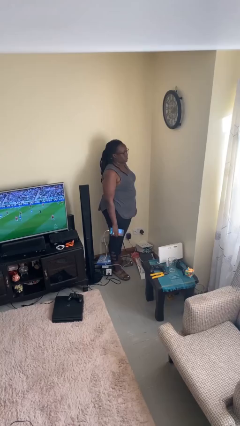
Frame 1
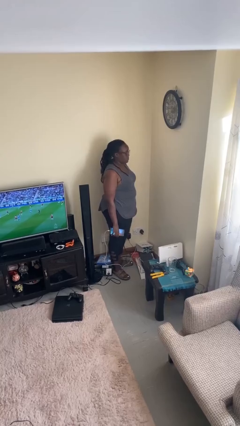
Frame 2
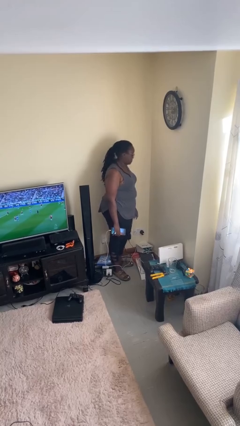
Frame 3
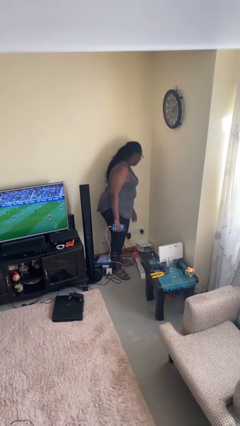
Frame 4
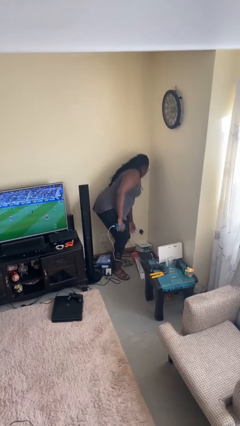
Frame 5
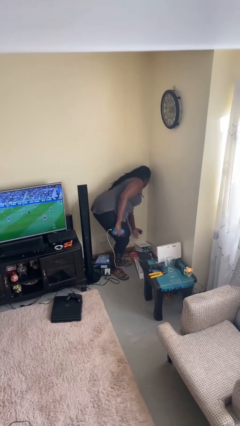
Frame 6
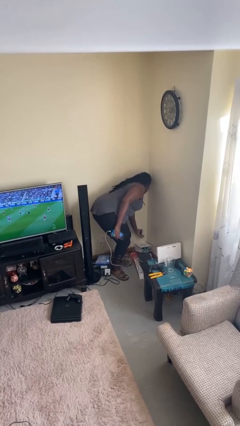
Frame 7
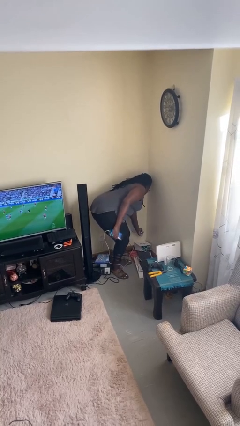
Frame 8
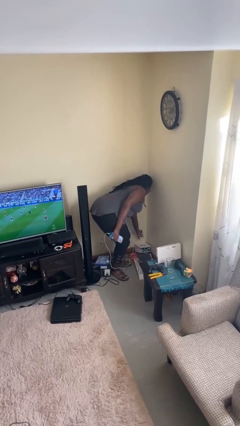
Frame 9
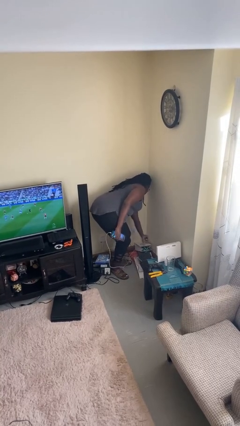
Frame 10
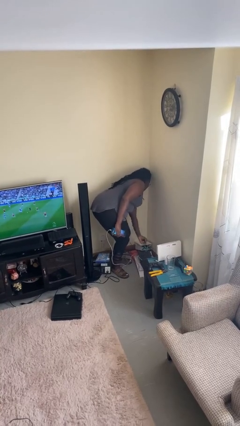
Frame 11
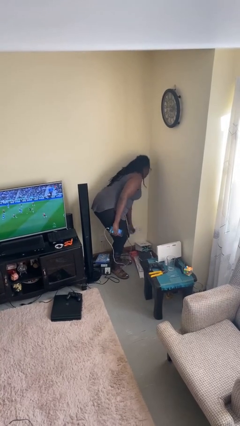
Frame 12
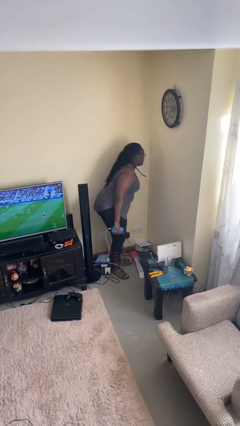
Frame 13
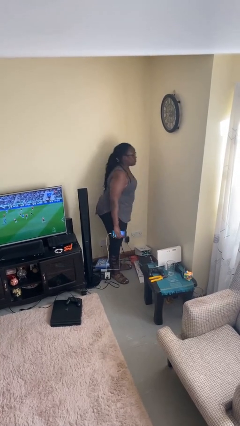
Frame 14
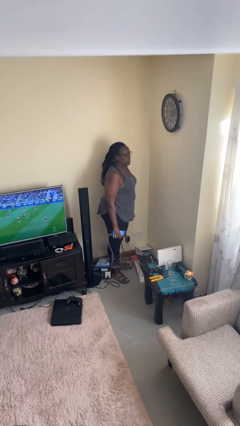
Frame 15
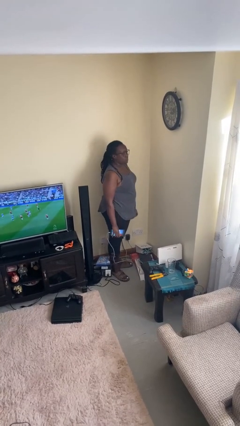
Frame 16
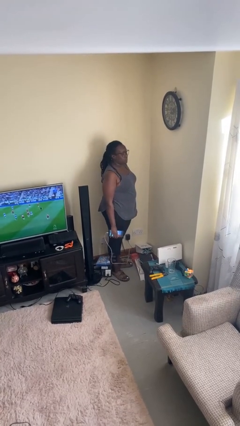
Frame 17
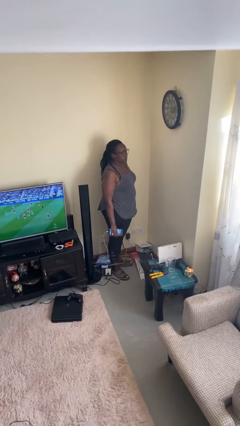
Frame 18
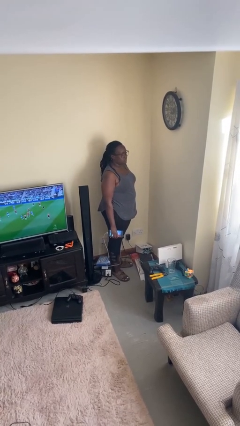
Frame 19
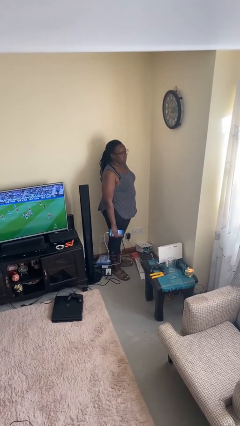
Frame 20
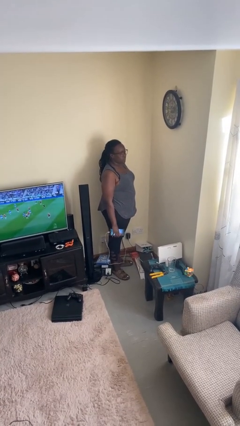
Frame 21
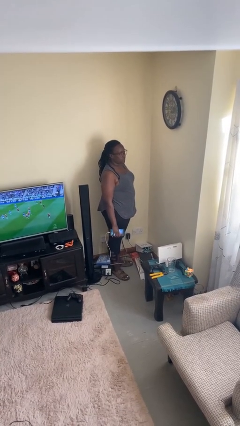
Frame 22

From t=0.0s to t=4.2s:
person unplugs from electrical socket

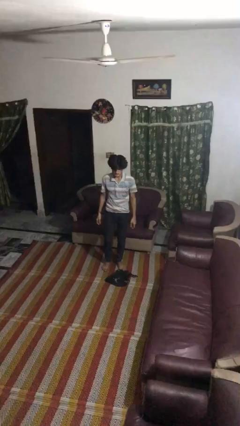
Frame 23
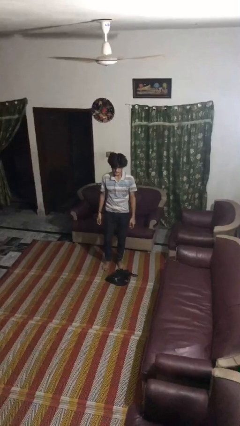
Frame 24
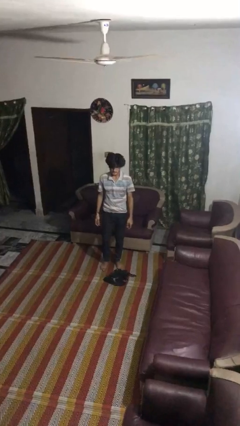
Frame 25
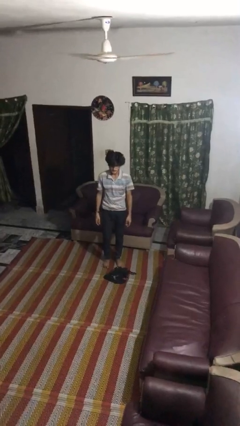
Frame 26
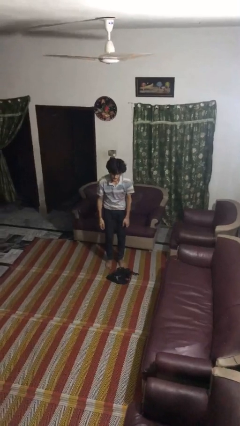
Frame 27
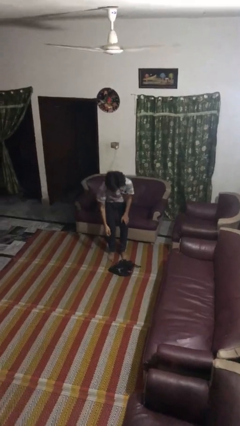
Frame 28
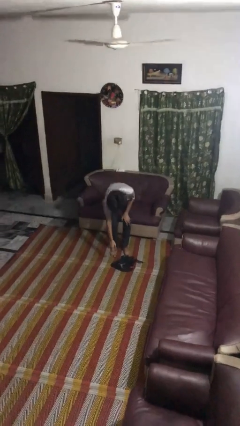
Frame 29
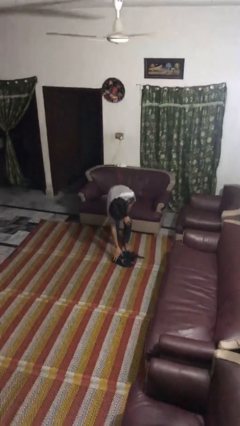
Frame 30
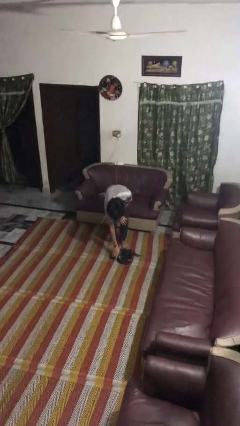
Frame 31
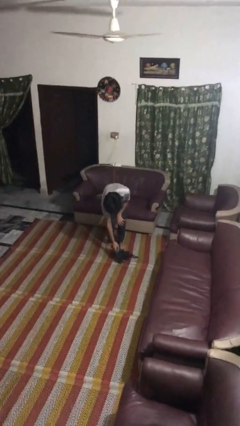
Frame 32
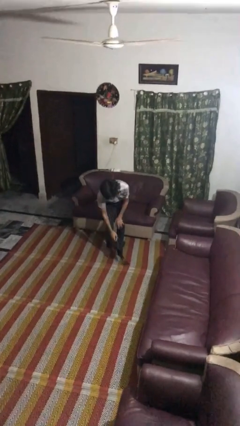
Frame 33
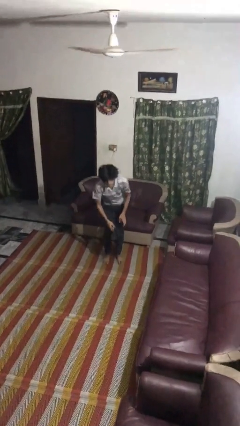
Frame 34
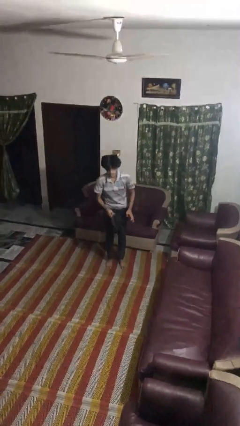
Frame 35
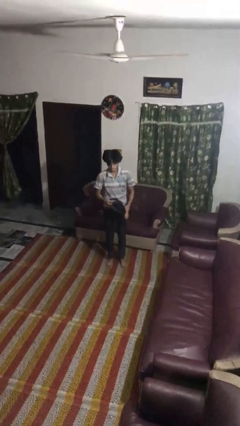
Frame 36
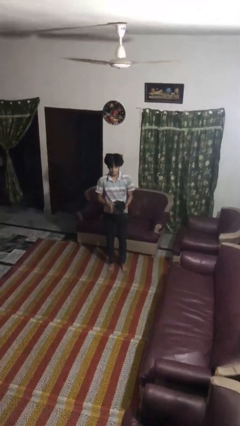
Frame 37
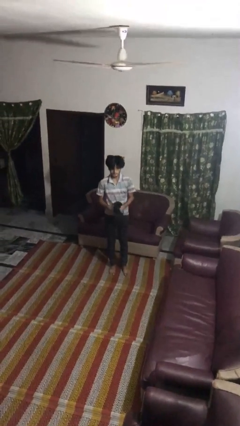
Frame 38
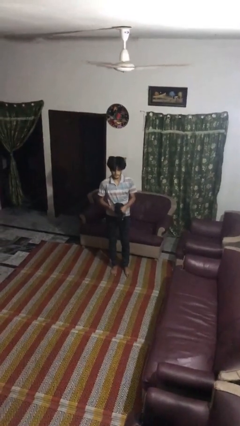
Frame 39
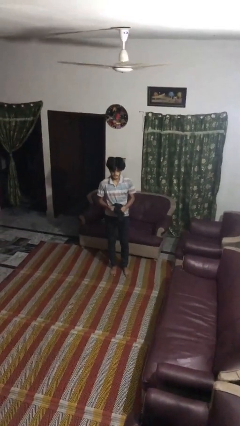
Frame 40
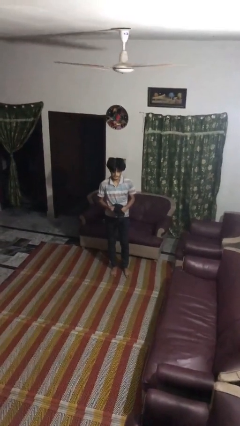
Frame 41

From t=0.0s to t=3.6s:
person picks up object from floor

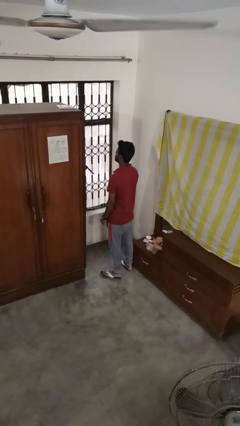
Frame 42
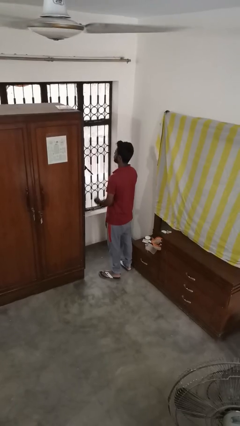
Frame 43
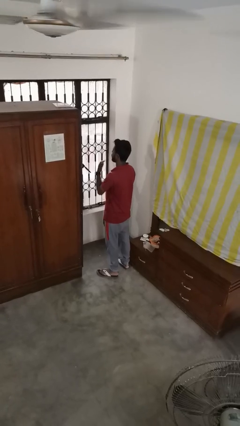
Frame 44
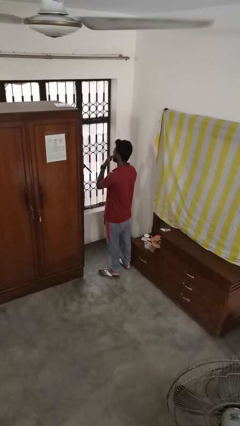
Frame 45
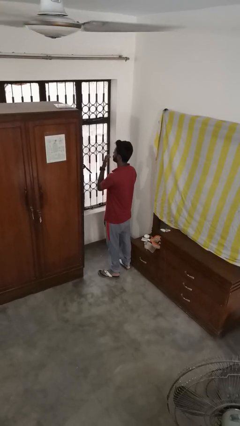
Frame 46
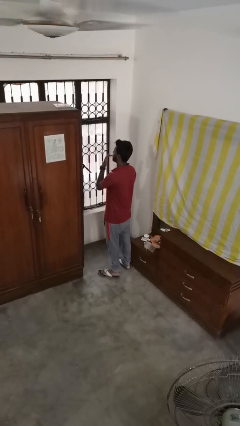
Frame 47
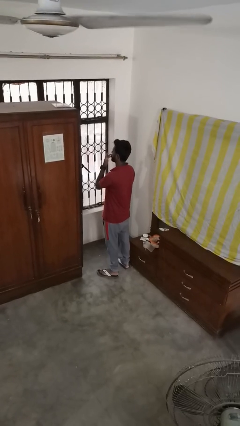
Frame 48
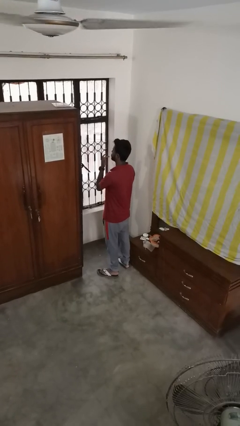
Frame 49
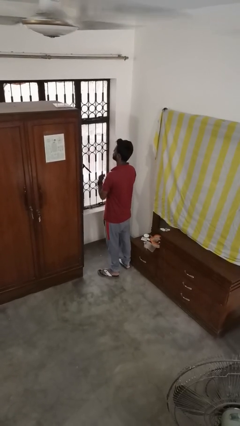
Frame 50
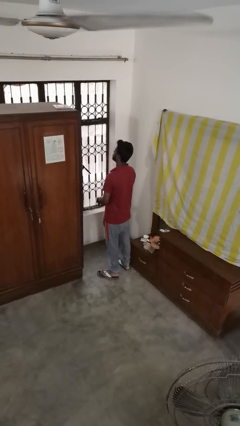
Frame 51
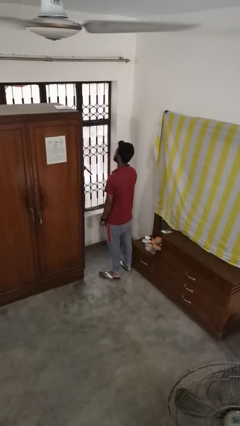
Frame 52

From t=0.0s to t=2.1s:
person licks fingers

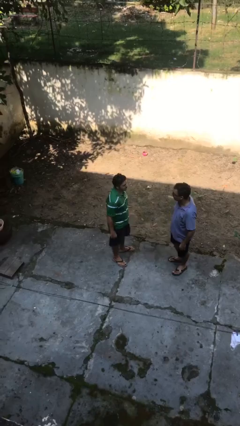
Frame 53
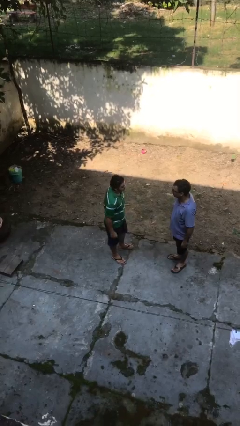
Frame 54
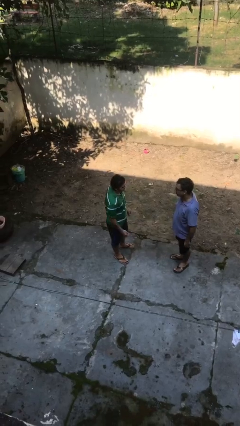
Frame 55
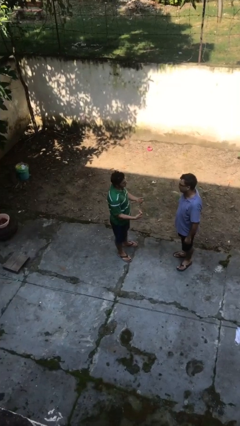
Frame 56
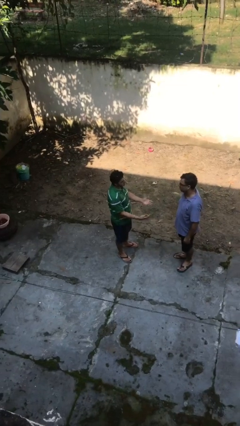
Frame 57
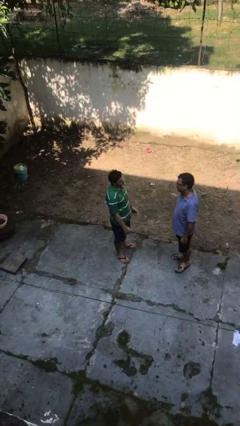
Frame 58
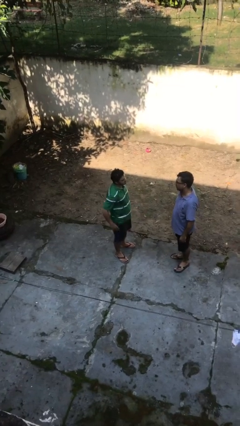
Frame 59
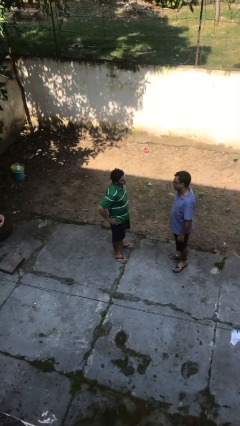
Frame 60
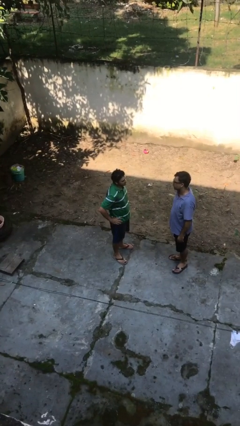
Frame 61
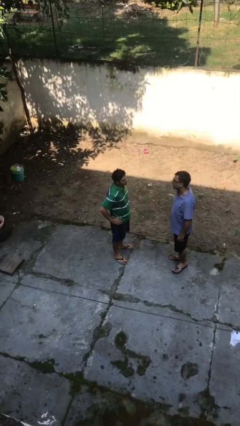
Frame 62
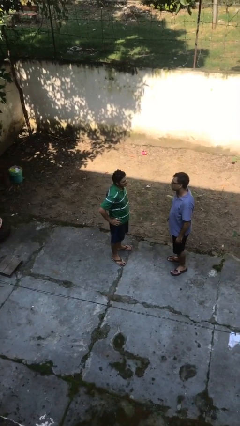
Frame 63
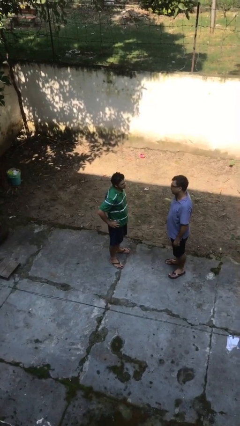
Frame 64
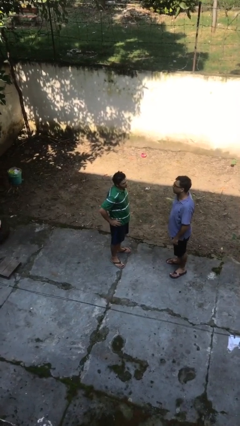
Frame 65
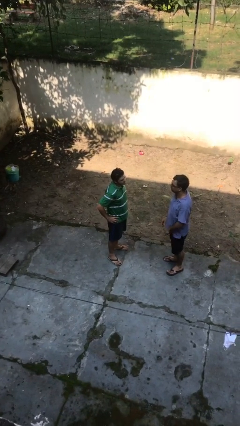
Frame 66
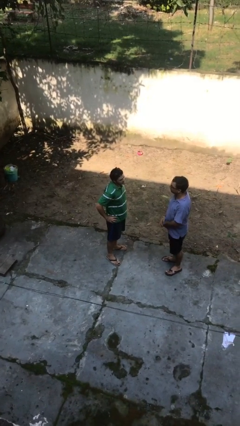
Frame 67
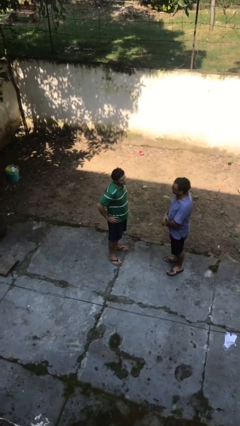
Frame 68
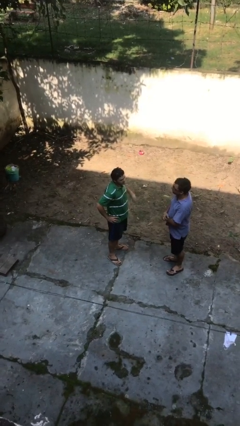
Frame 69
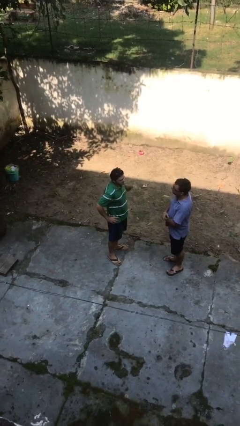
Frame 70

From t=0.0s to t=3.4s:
person talks to person

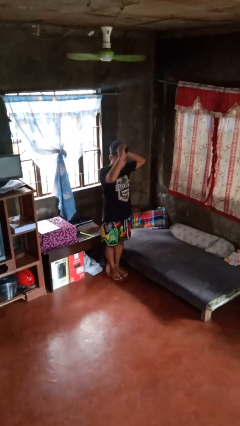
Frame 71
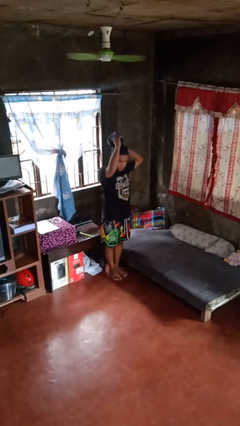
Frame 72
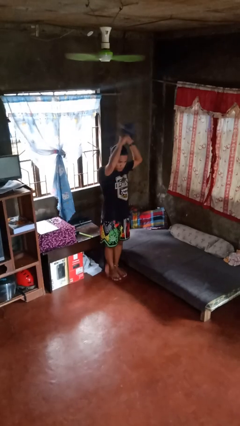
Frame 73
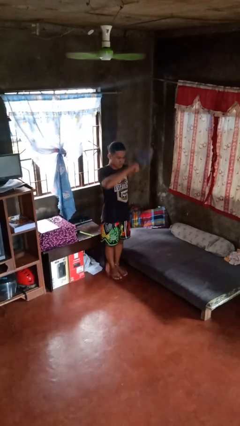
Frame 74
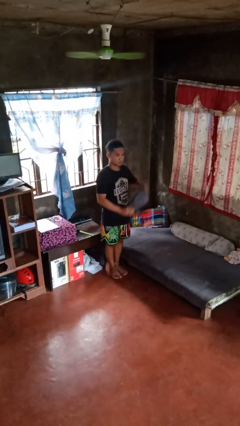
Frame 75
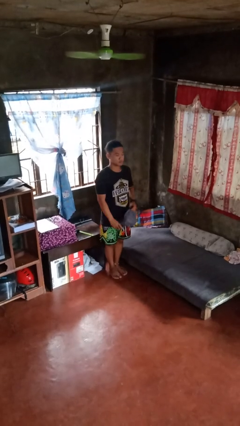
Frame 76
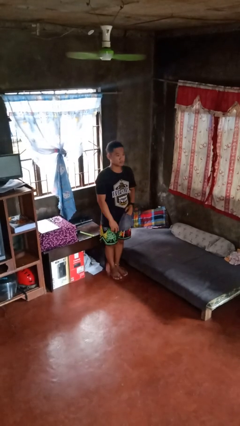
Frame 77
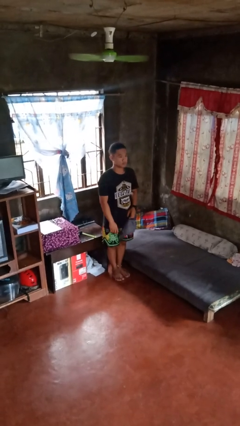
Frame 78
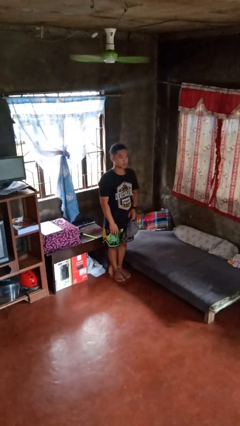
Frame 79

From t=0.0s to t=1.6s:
person takes off hat

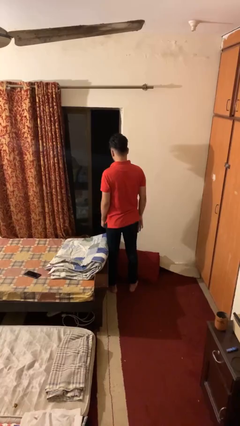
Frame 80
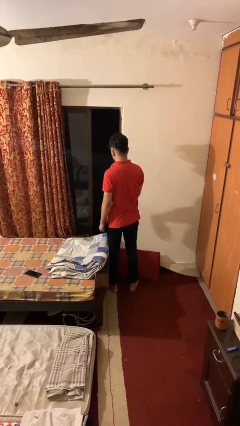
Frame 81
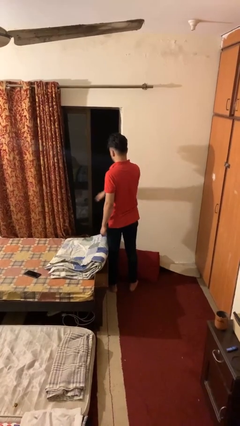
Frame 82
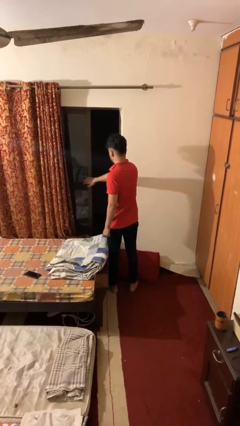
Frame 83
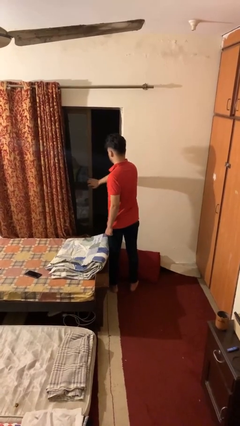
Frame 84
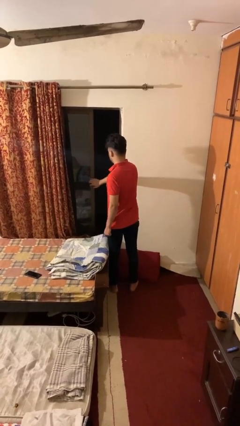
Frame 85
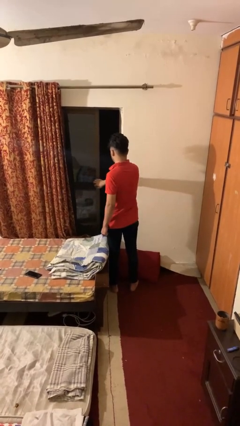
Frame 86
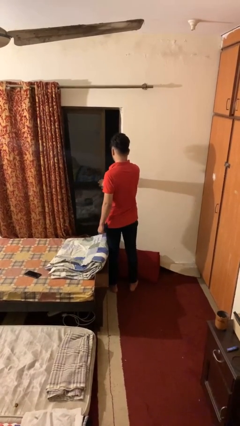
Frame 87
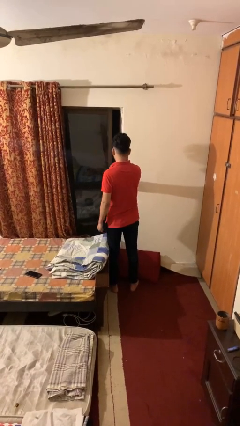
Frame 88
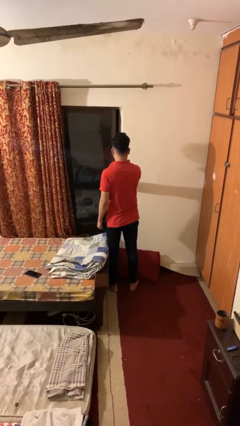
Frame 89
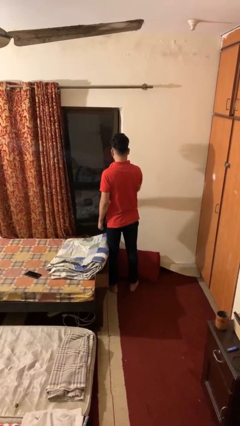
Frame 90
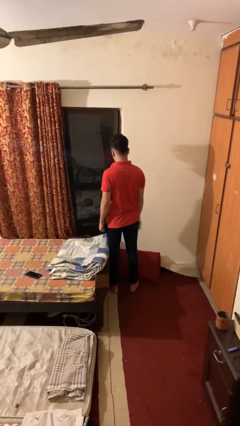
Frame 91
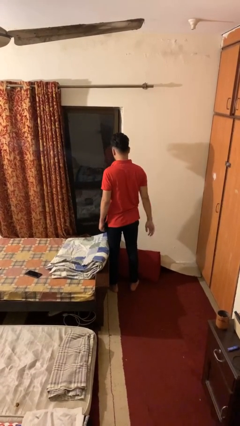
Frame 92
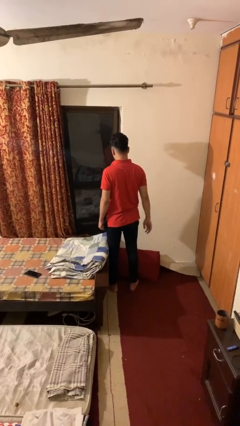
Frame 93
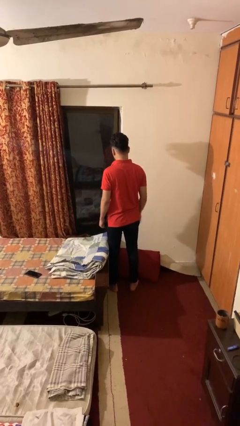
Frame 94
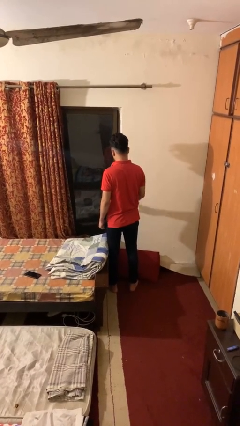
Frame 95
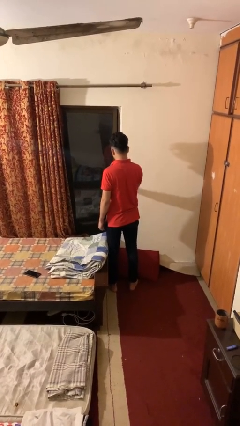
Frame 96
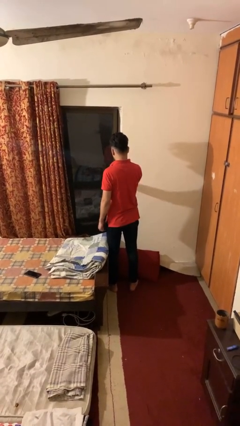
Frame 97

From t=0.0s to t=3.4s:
person closes home window
